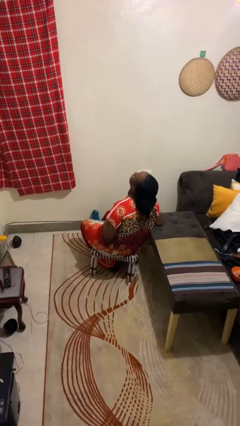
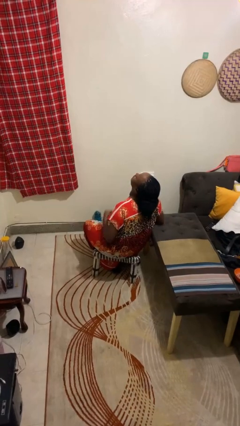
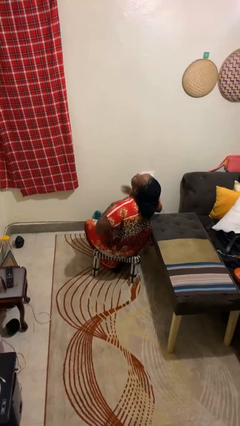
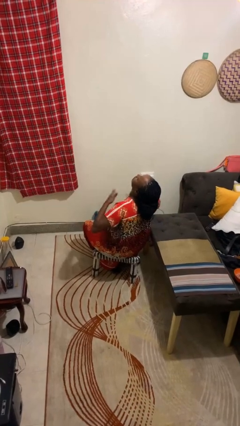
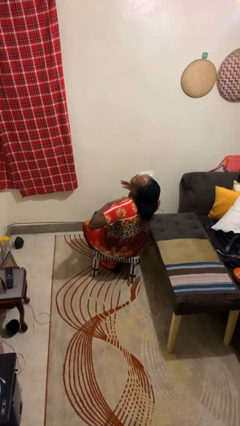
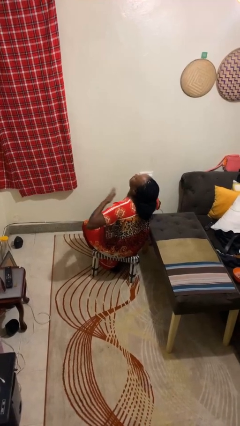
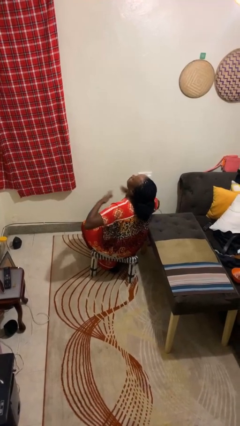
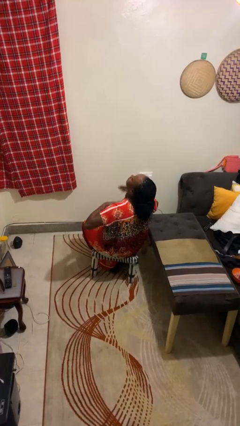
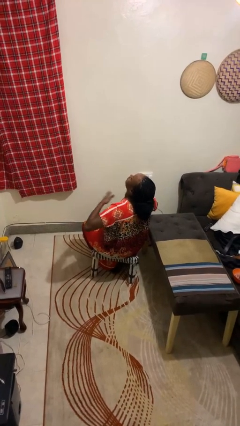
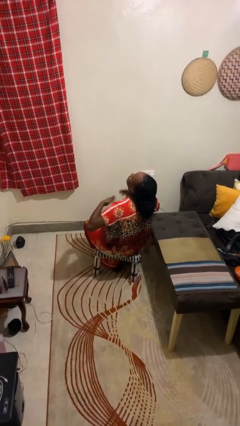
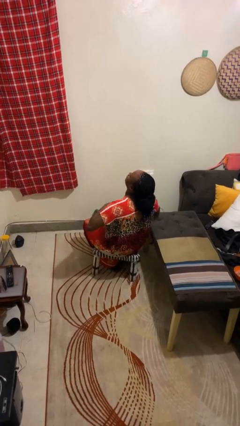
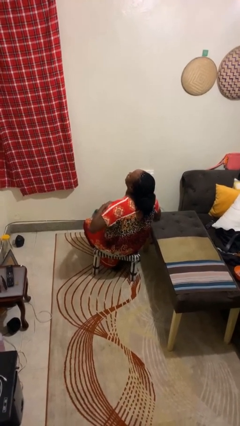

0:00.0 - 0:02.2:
person drums on chest

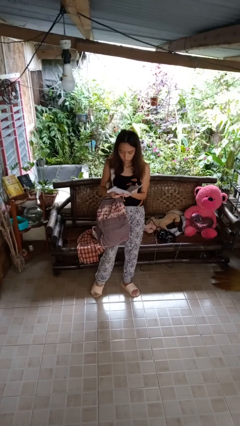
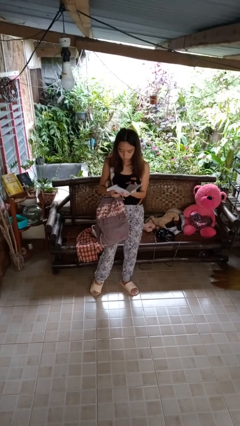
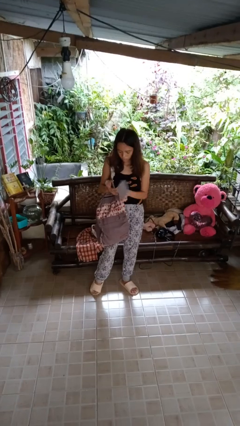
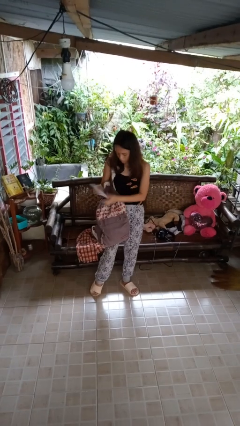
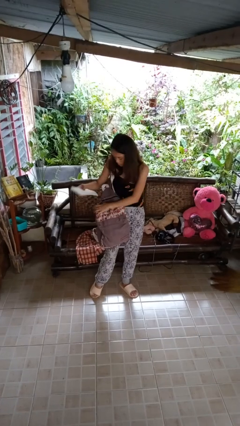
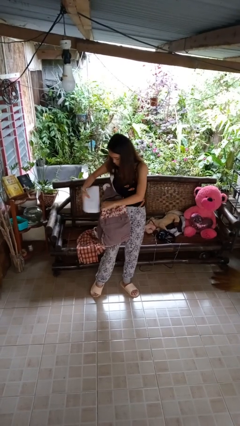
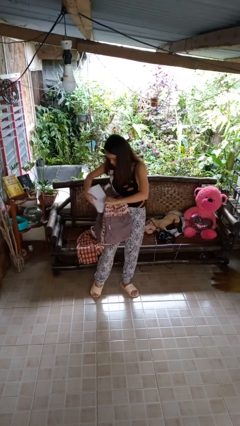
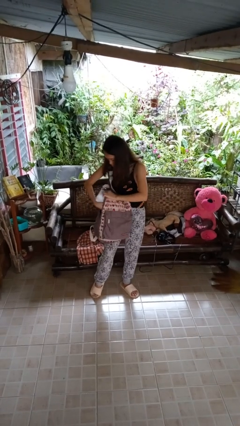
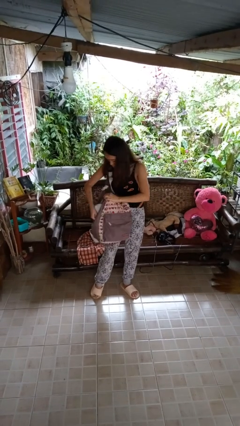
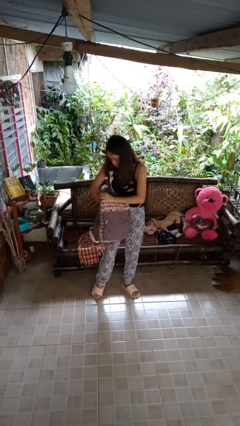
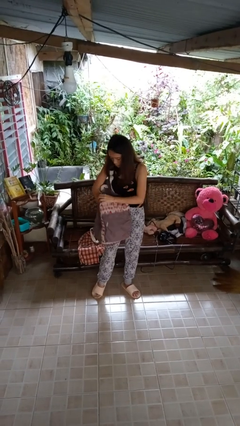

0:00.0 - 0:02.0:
person puts object into backpack

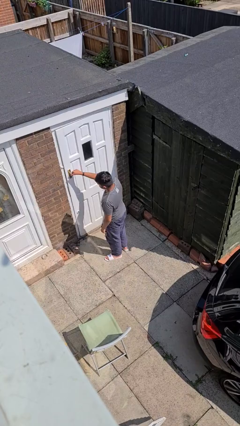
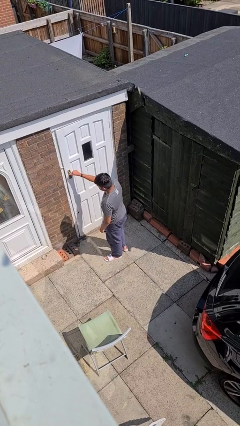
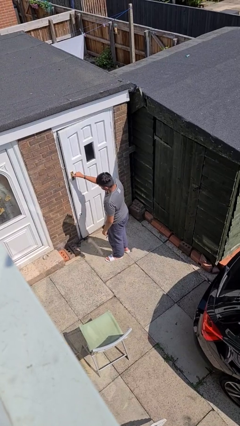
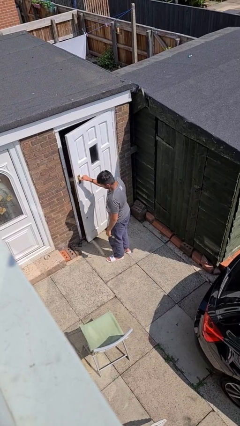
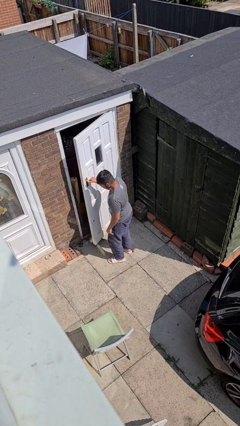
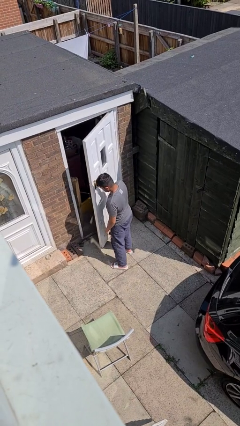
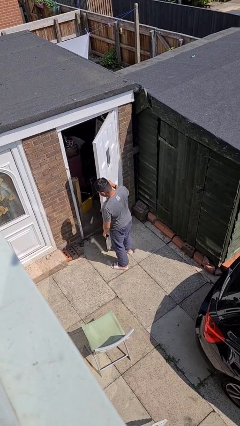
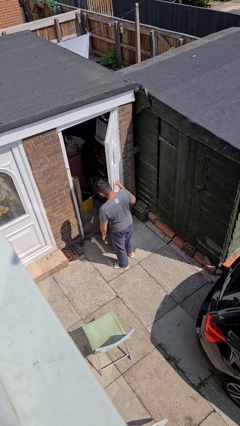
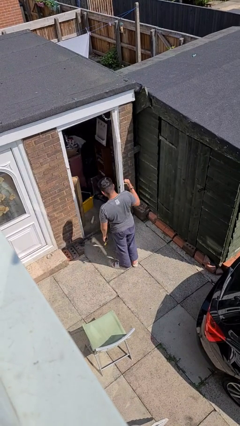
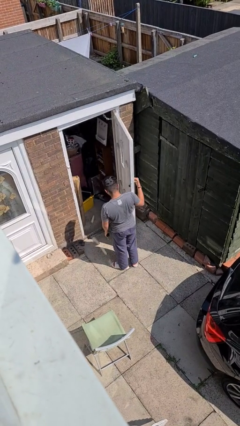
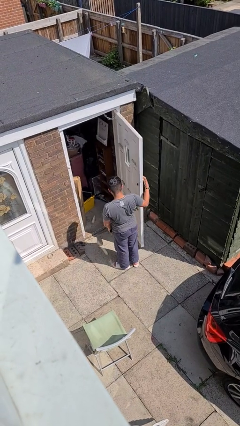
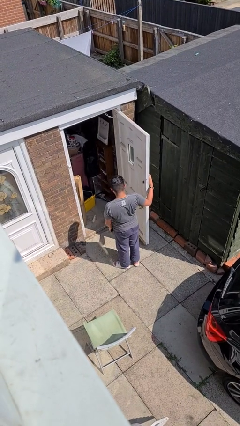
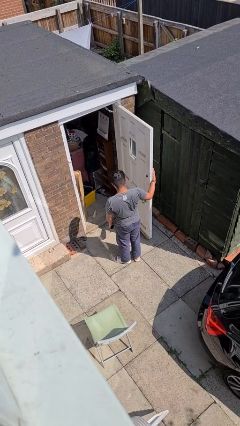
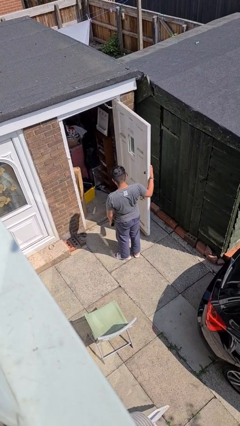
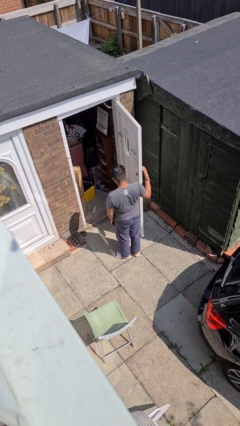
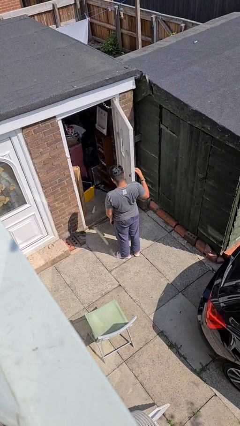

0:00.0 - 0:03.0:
person opens facility door

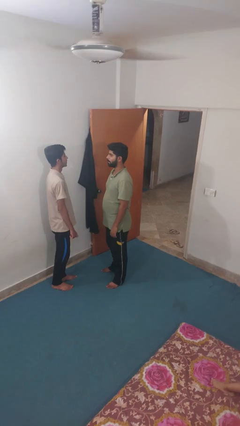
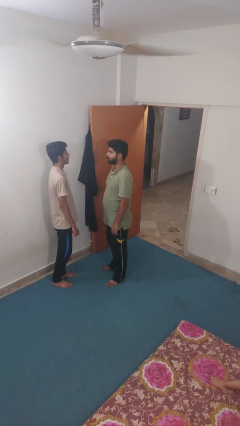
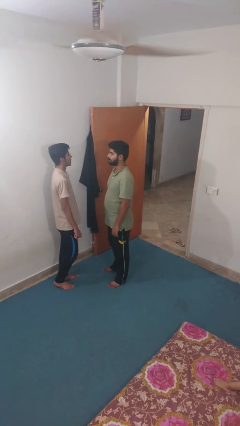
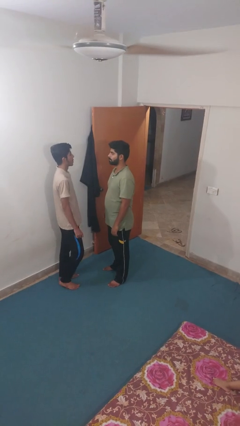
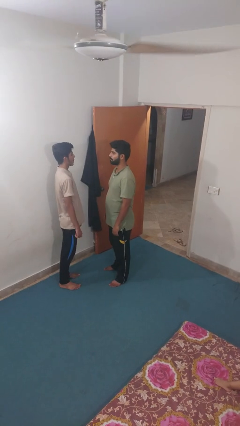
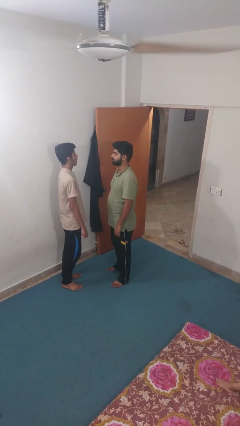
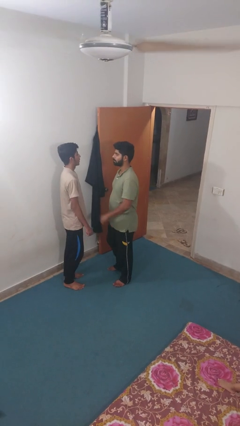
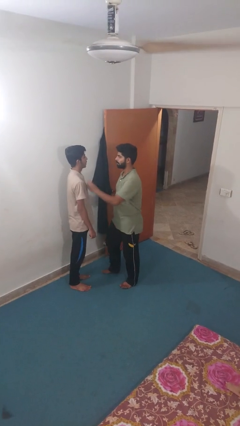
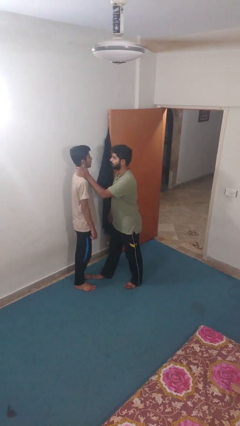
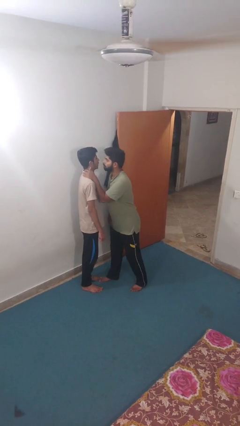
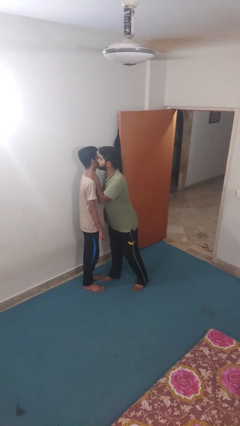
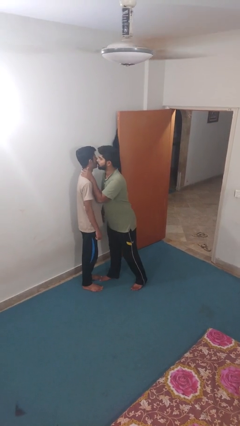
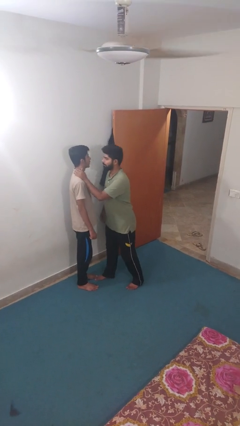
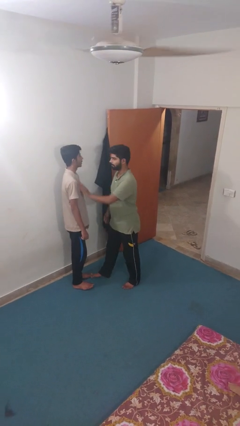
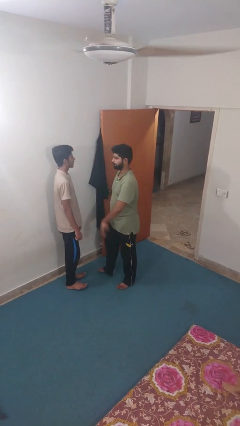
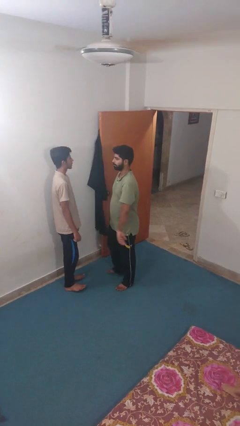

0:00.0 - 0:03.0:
person kisses cheek of person

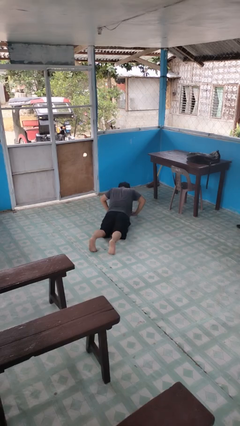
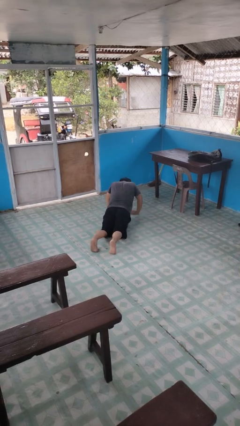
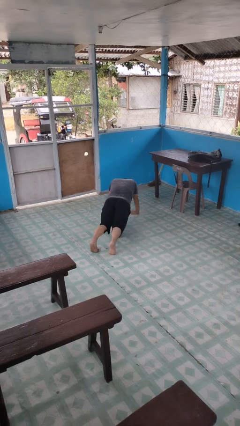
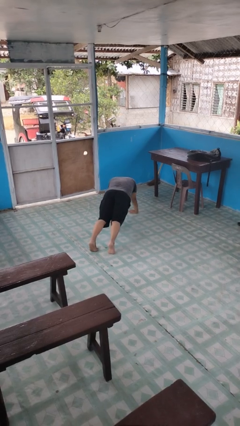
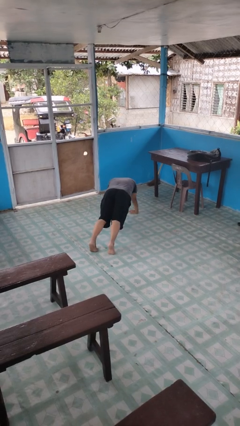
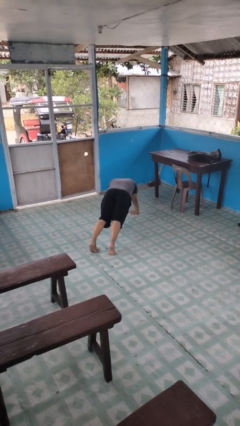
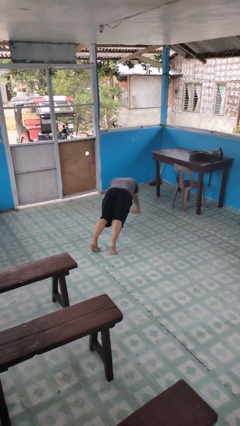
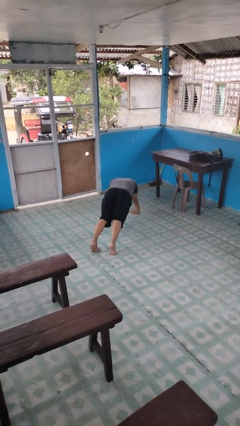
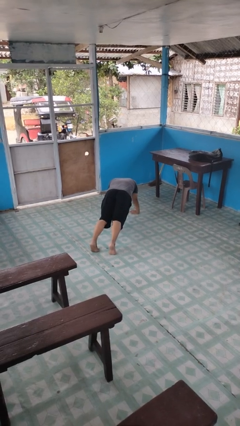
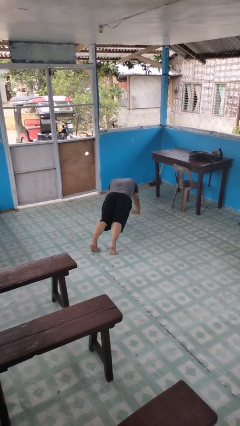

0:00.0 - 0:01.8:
person exercises with pushup

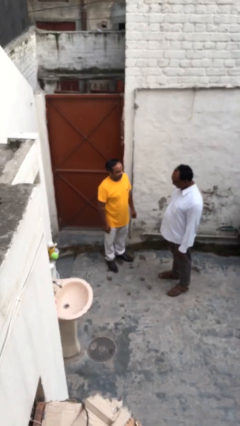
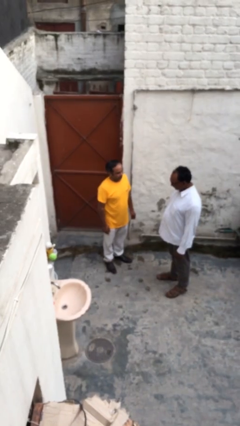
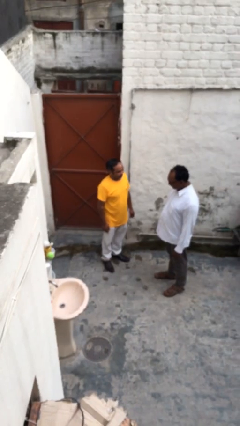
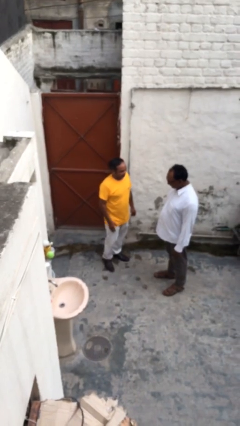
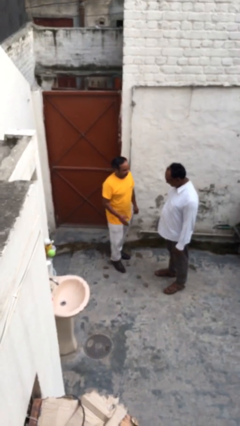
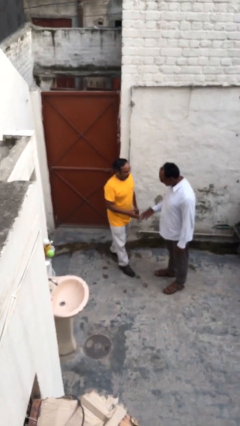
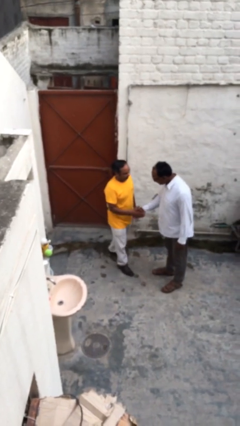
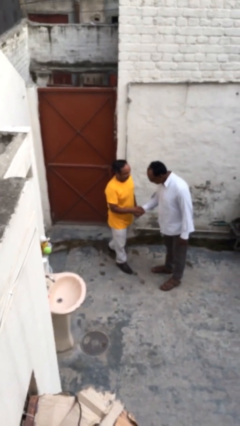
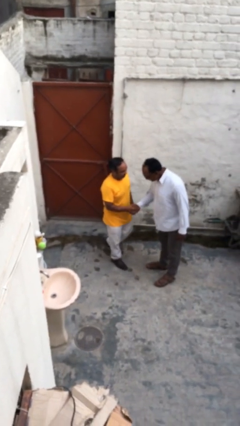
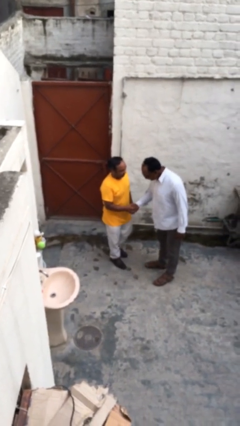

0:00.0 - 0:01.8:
person shakes hand

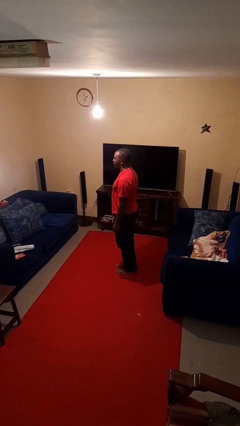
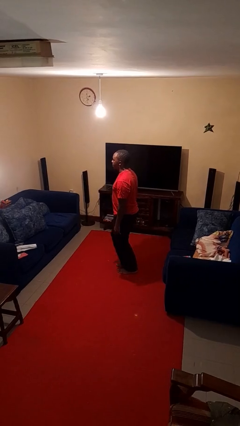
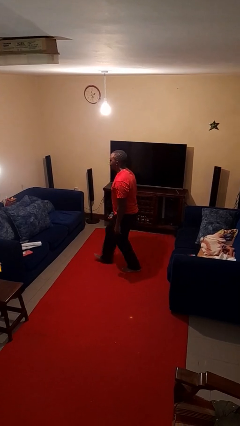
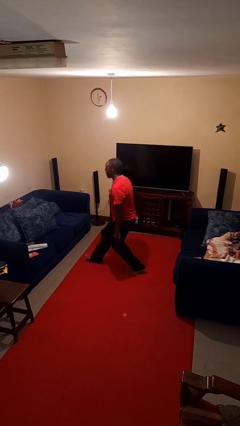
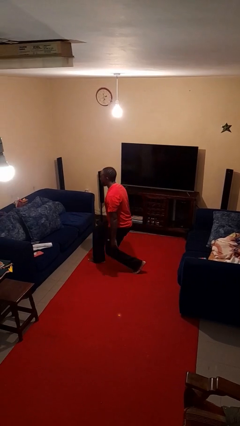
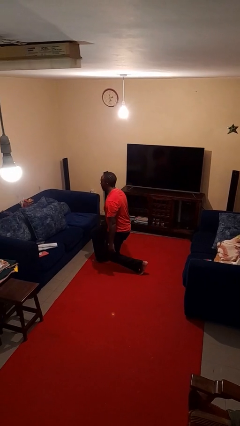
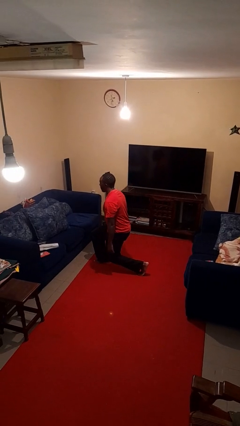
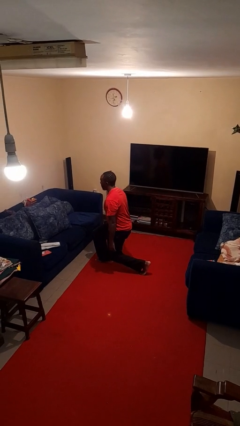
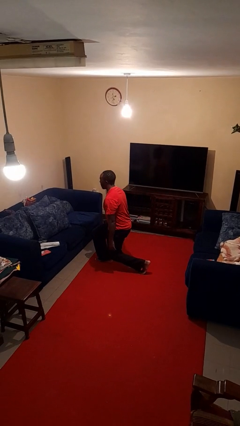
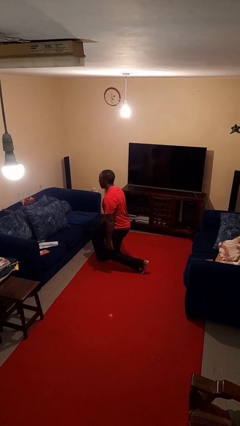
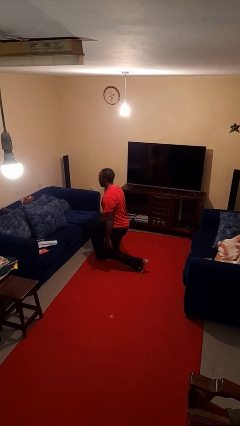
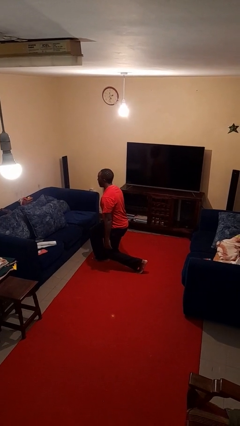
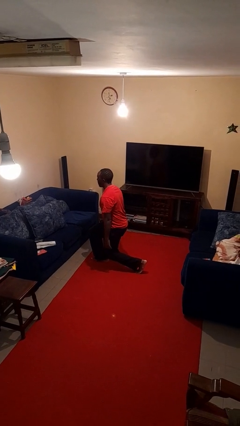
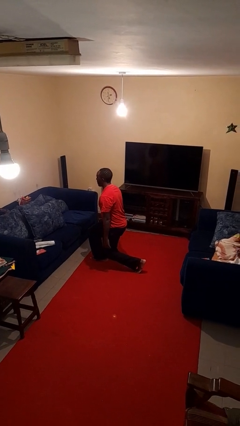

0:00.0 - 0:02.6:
person exercises with lunges

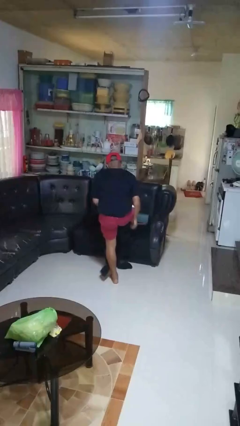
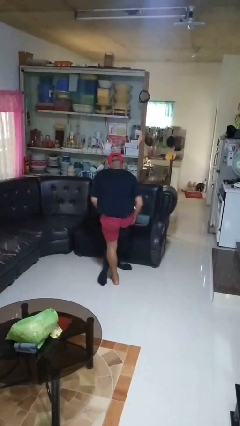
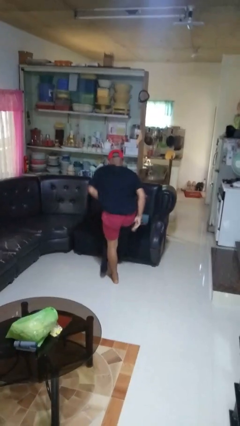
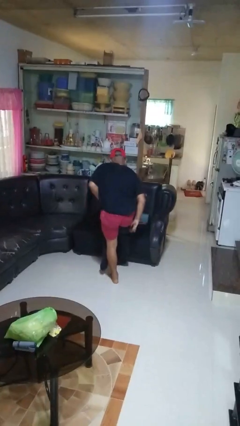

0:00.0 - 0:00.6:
person puts on pants
